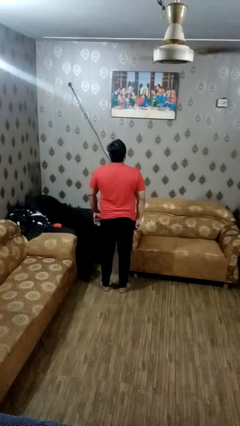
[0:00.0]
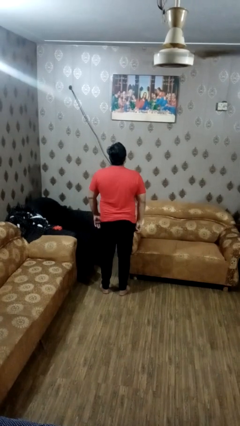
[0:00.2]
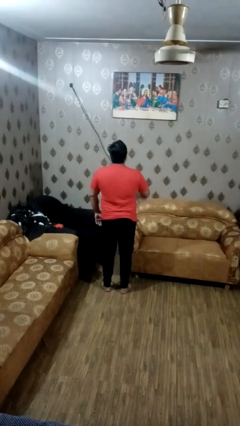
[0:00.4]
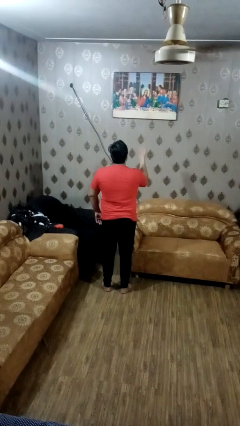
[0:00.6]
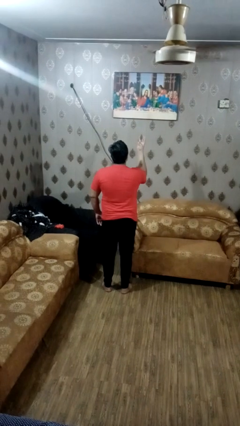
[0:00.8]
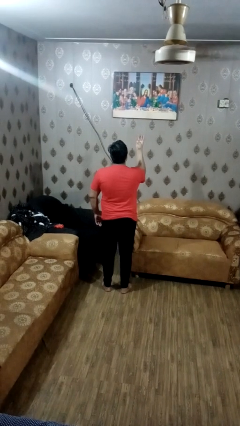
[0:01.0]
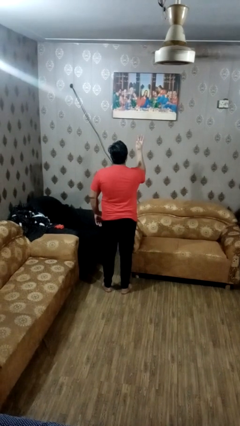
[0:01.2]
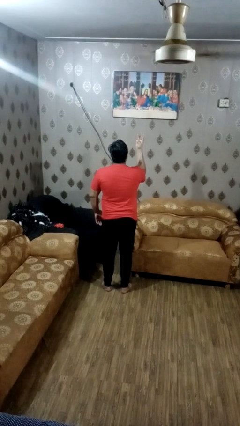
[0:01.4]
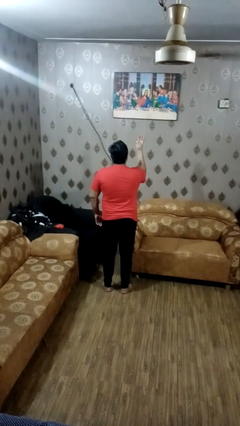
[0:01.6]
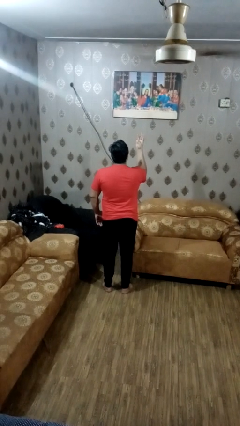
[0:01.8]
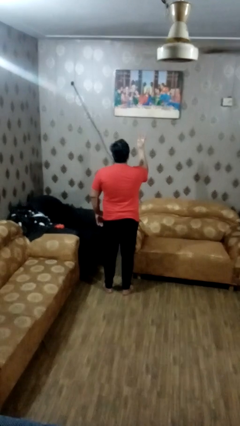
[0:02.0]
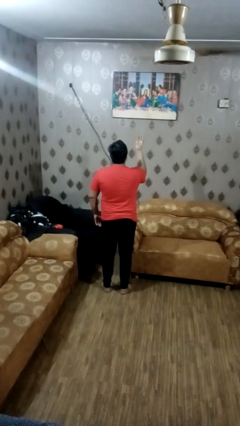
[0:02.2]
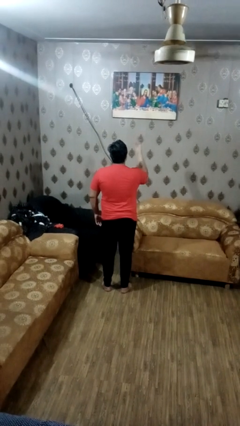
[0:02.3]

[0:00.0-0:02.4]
person gestures number three

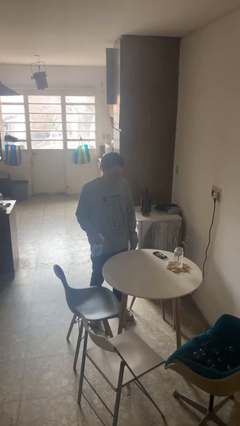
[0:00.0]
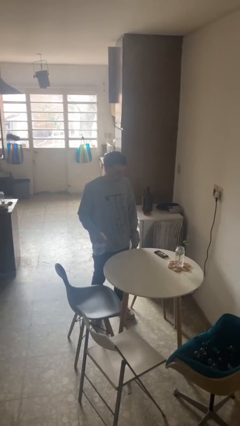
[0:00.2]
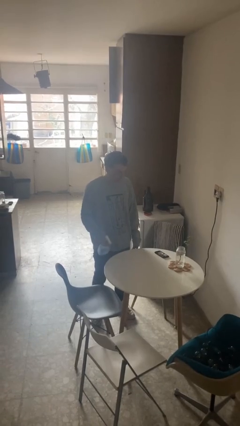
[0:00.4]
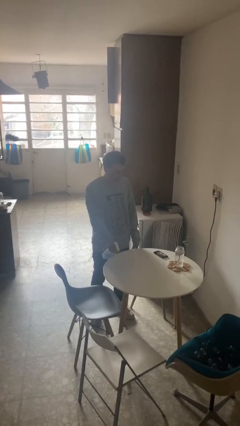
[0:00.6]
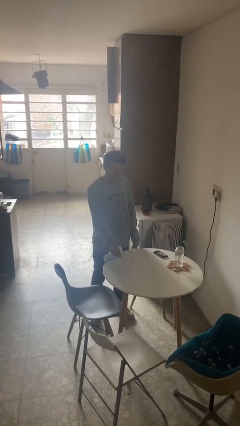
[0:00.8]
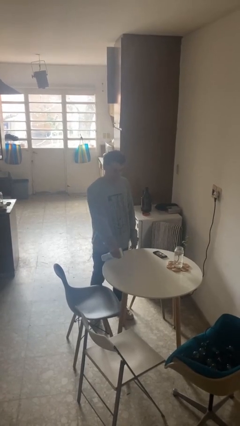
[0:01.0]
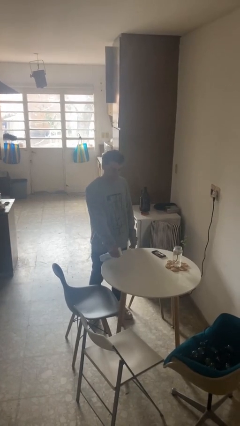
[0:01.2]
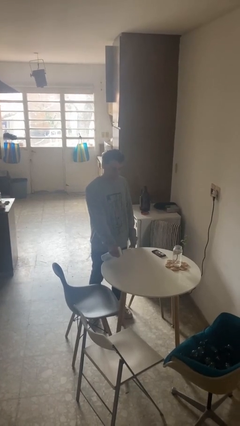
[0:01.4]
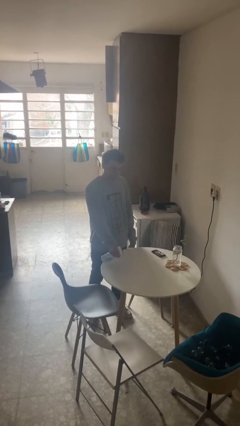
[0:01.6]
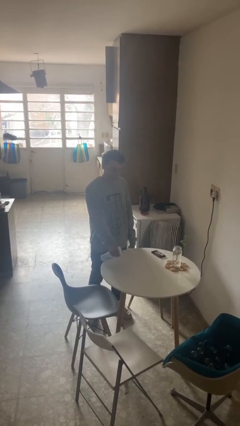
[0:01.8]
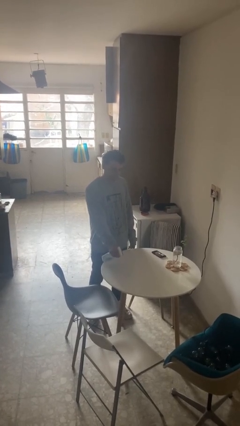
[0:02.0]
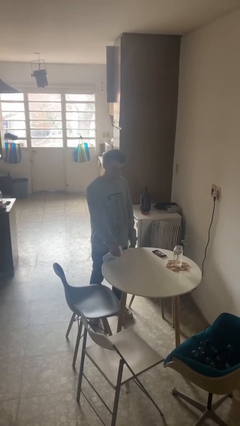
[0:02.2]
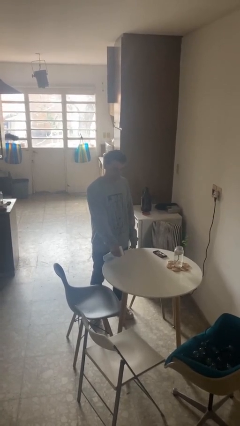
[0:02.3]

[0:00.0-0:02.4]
person sprays from bottle

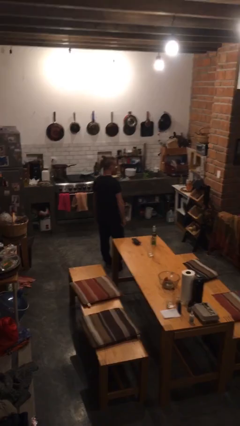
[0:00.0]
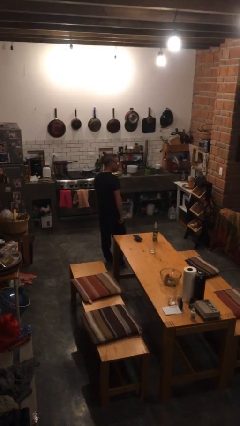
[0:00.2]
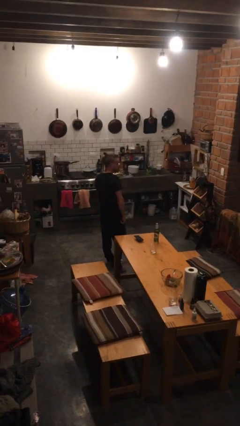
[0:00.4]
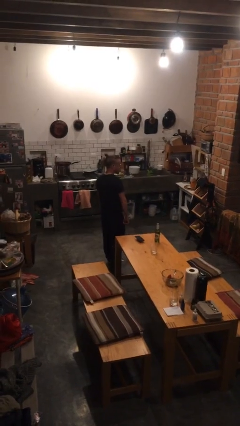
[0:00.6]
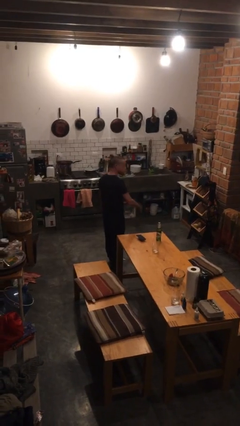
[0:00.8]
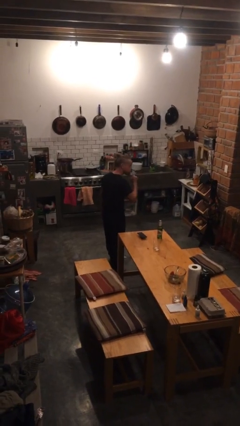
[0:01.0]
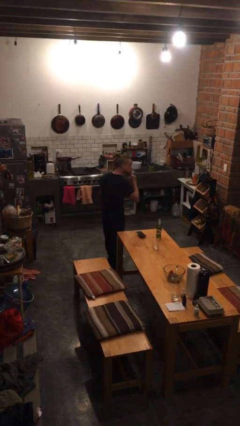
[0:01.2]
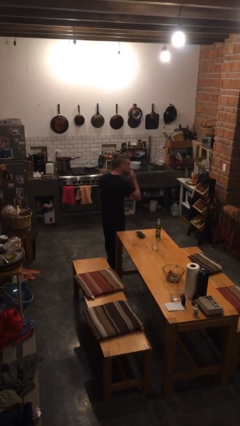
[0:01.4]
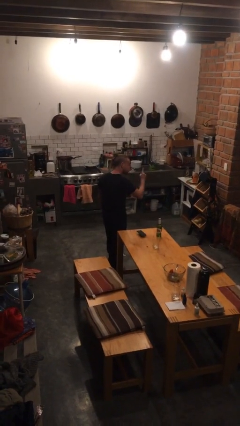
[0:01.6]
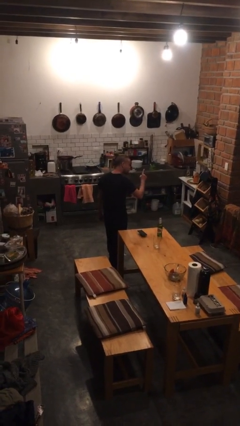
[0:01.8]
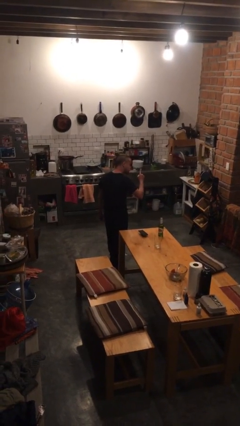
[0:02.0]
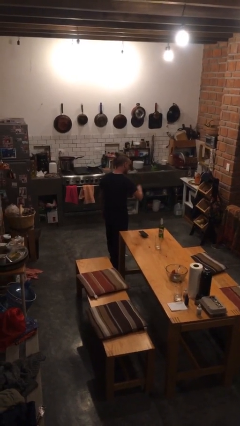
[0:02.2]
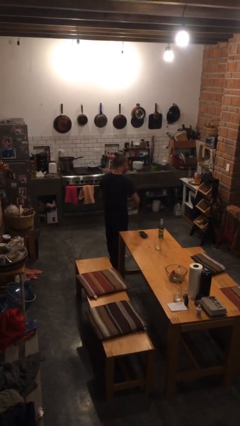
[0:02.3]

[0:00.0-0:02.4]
person gestures be quiet

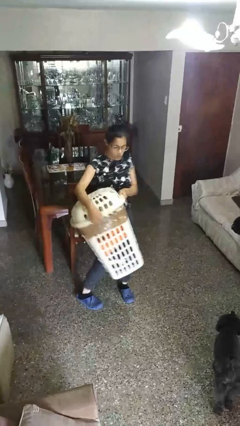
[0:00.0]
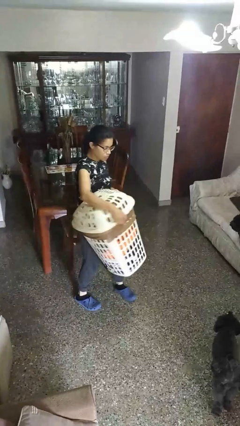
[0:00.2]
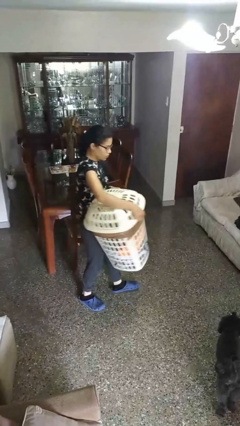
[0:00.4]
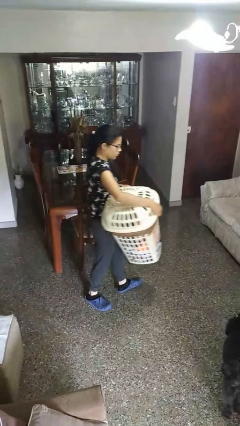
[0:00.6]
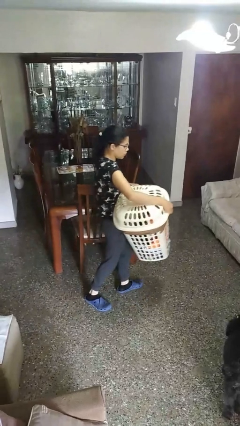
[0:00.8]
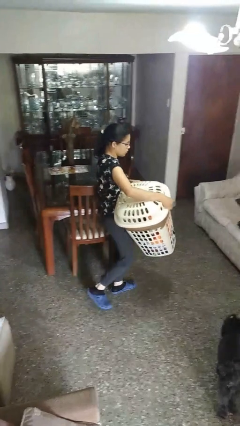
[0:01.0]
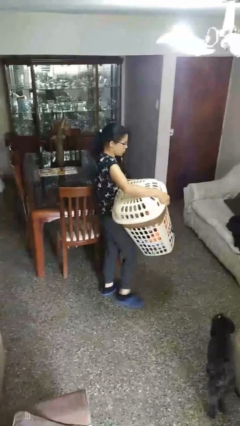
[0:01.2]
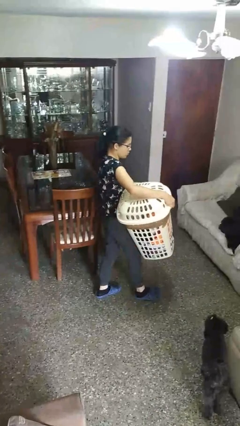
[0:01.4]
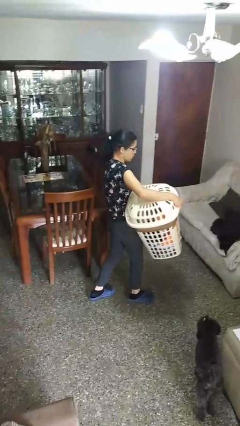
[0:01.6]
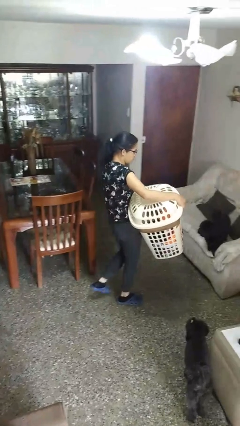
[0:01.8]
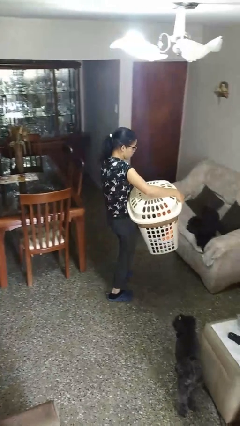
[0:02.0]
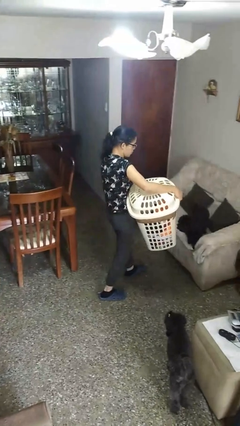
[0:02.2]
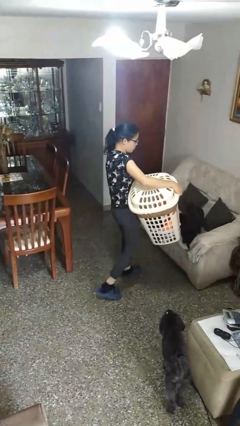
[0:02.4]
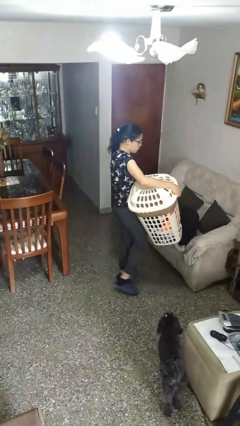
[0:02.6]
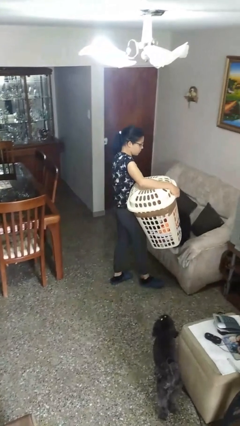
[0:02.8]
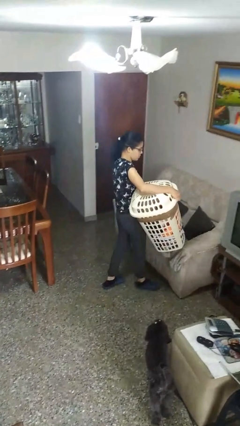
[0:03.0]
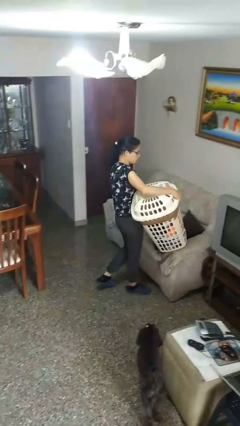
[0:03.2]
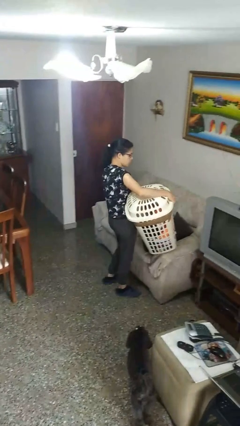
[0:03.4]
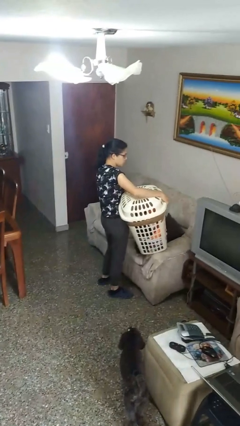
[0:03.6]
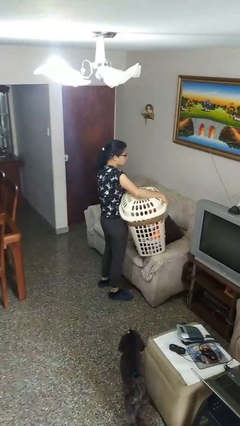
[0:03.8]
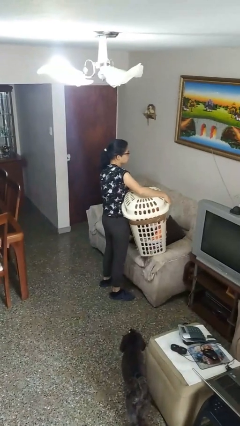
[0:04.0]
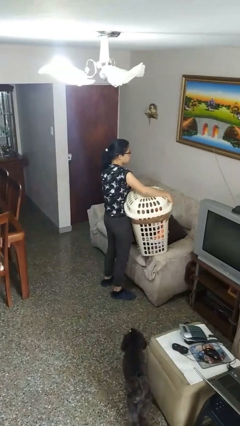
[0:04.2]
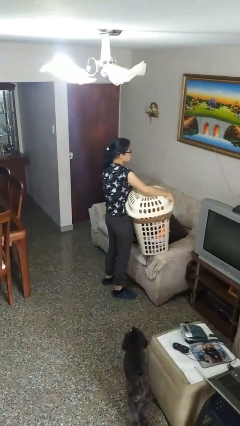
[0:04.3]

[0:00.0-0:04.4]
person carries laundry basket

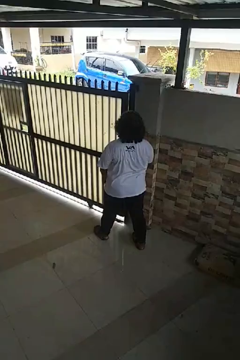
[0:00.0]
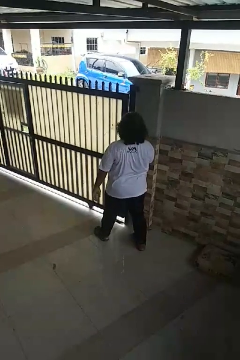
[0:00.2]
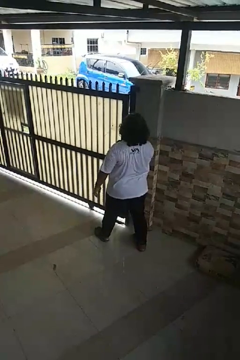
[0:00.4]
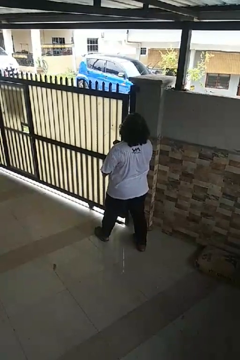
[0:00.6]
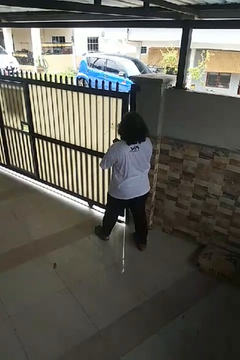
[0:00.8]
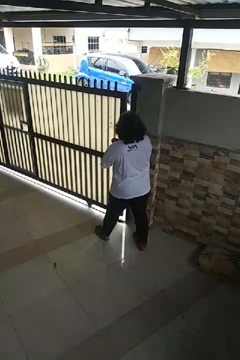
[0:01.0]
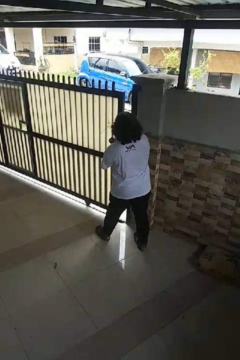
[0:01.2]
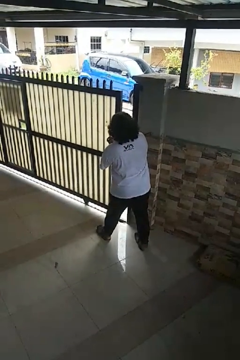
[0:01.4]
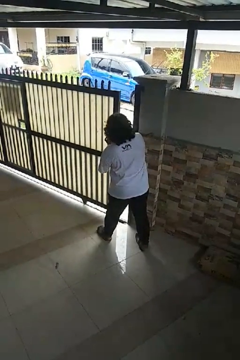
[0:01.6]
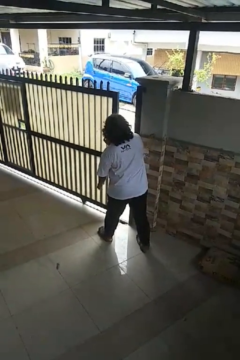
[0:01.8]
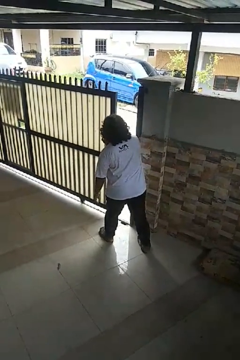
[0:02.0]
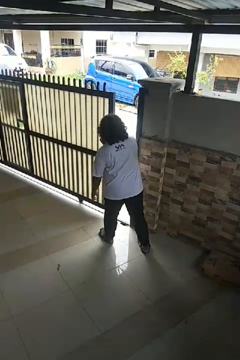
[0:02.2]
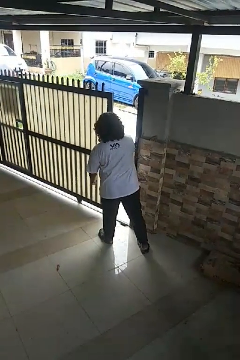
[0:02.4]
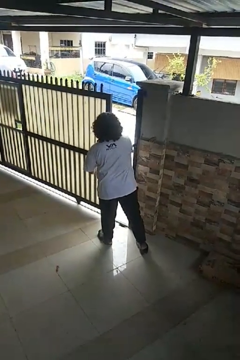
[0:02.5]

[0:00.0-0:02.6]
person opens sliding door

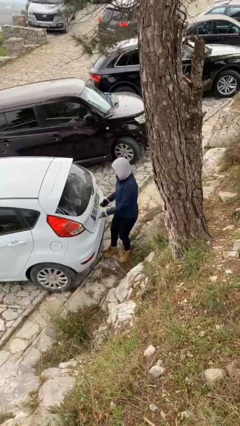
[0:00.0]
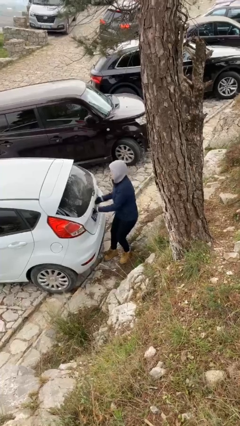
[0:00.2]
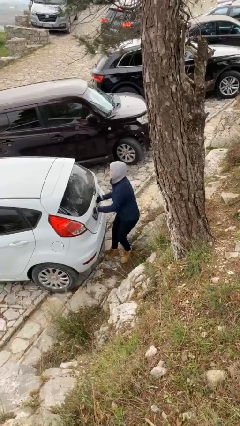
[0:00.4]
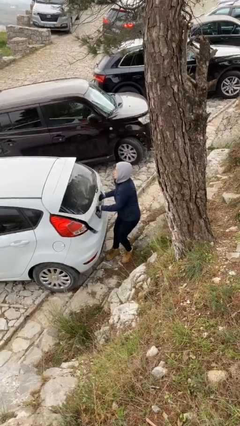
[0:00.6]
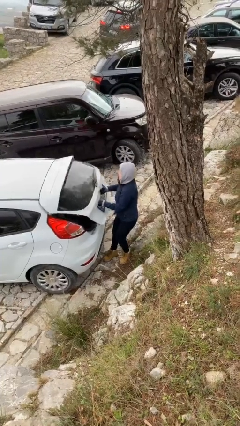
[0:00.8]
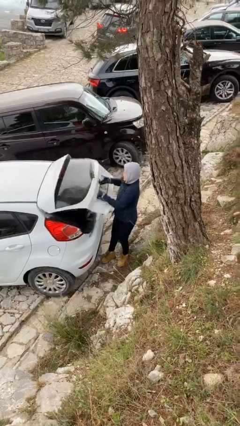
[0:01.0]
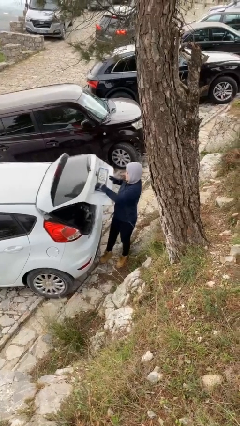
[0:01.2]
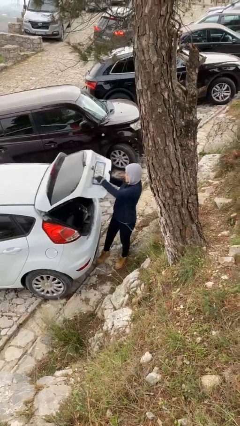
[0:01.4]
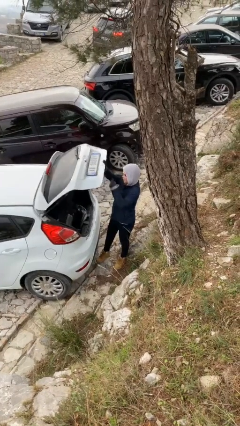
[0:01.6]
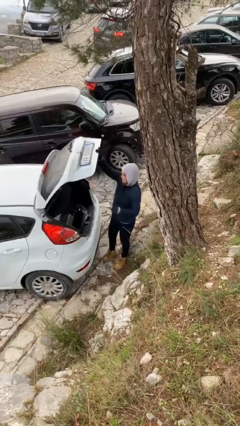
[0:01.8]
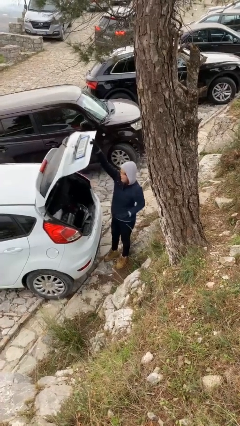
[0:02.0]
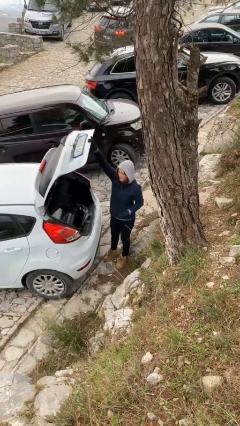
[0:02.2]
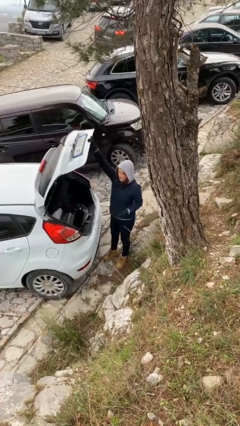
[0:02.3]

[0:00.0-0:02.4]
person opens car trunk

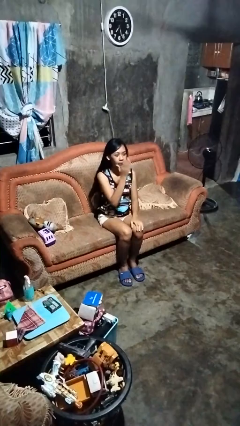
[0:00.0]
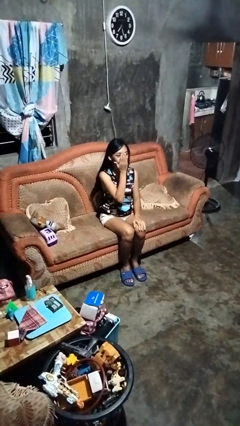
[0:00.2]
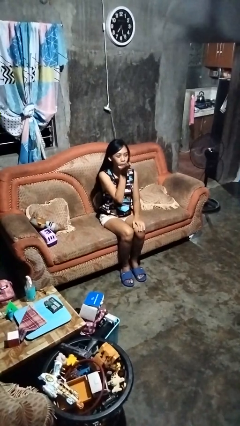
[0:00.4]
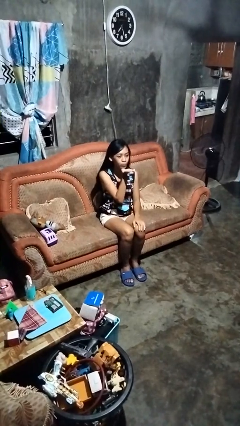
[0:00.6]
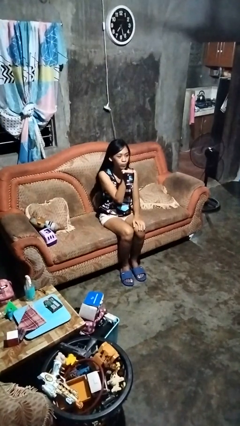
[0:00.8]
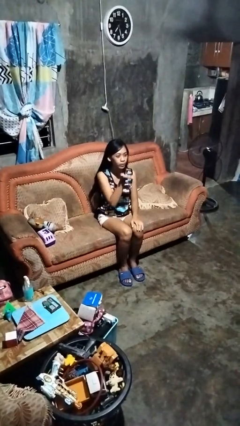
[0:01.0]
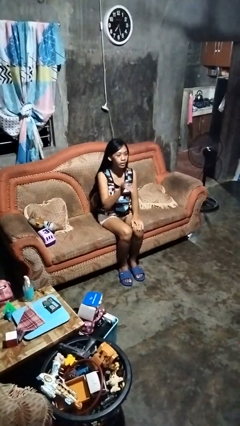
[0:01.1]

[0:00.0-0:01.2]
person gestures blow kiss
